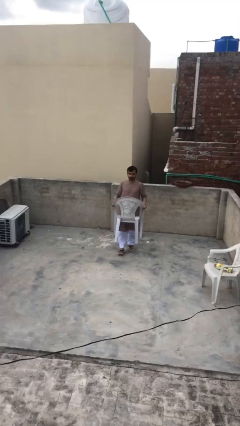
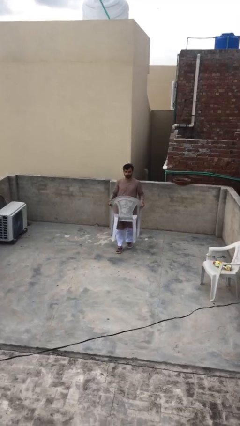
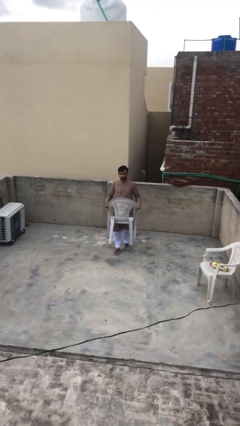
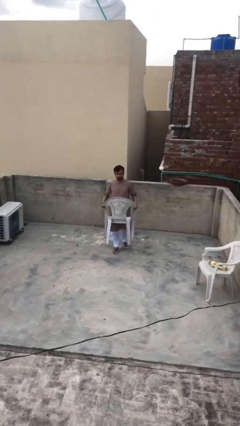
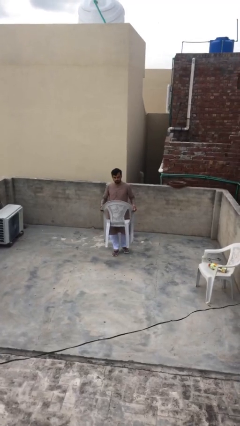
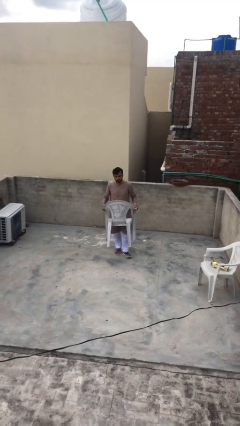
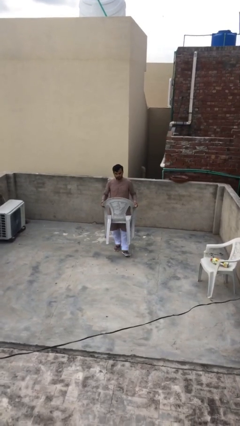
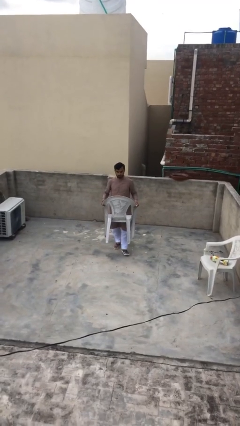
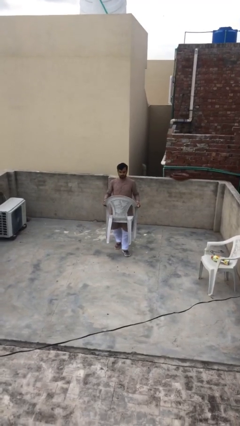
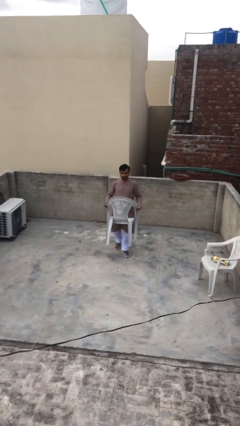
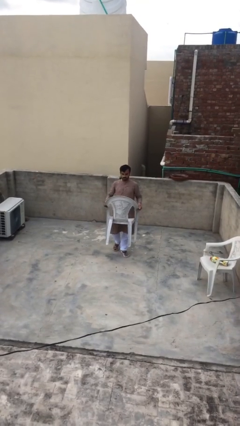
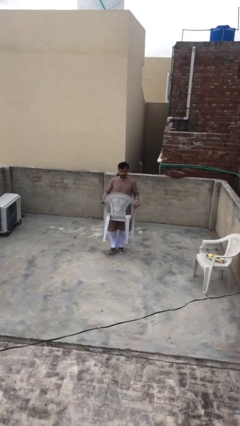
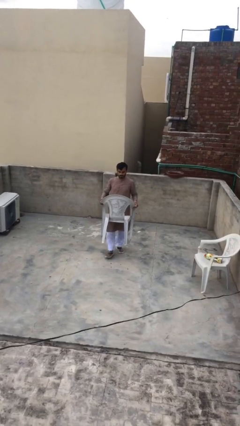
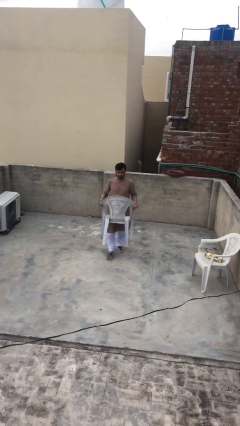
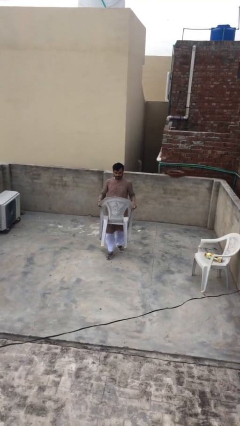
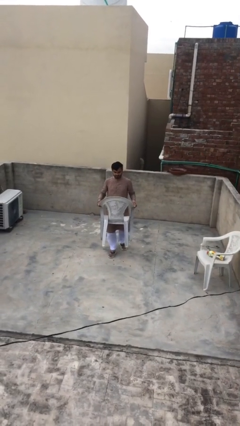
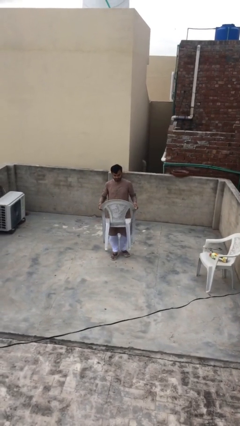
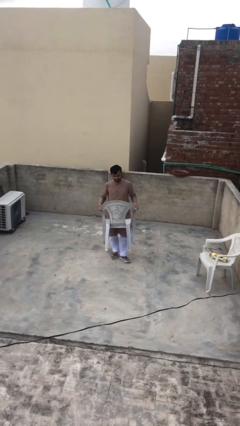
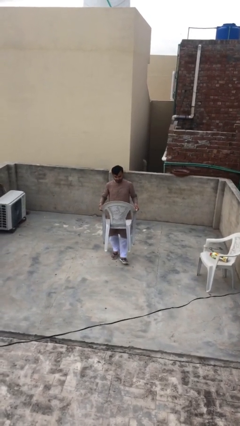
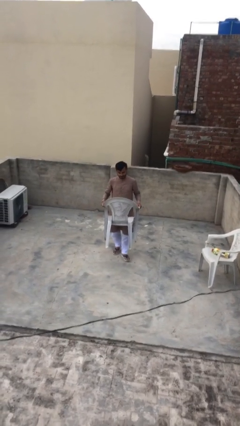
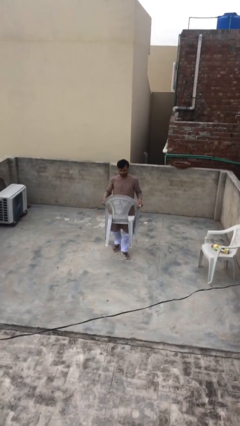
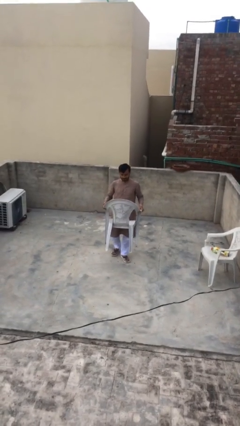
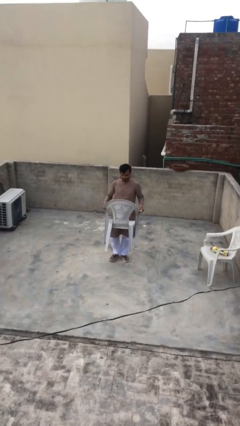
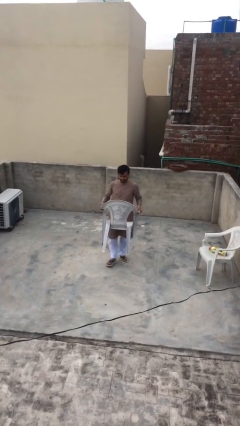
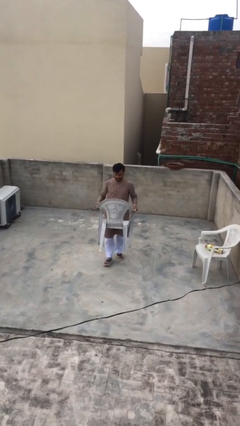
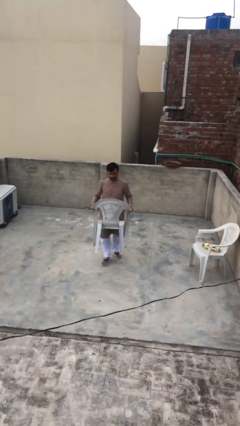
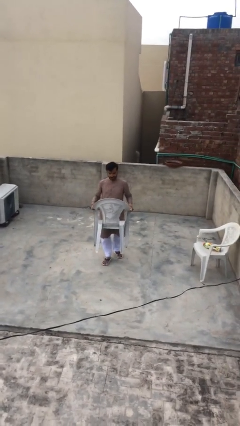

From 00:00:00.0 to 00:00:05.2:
person carries heavy object

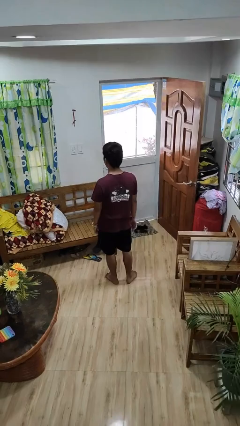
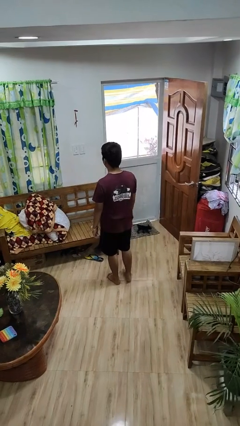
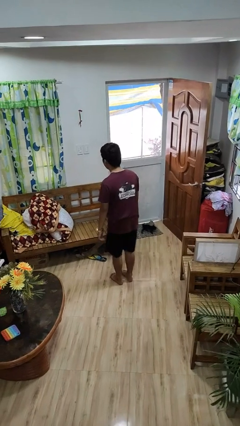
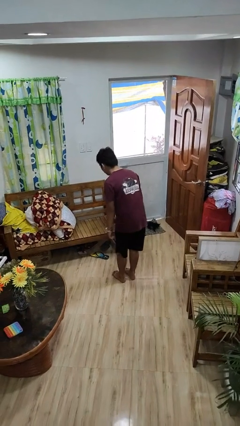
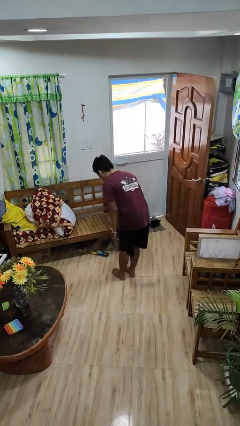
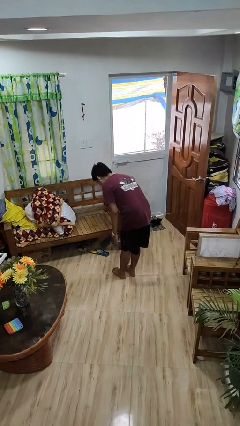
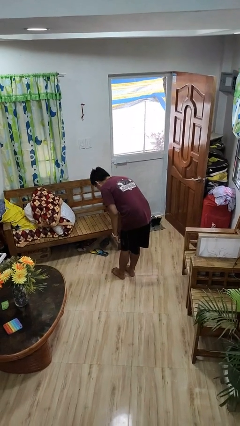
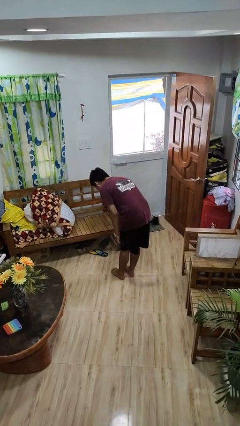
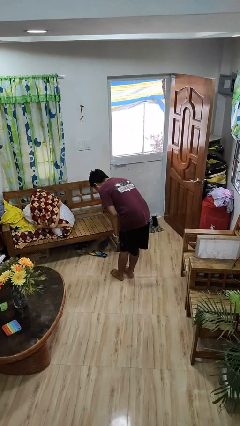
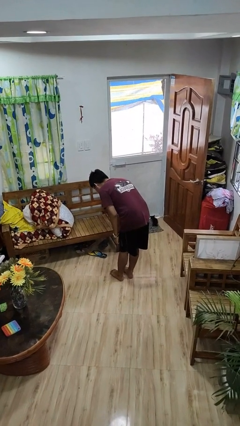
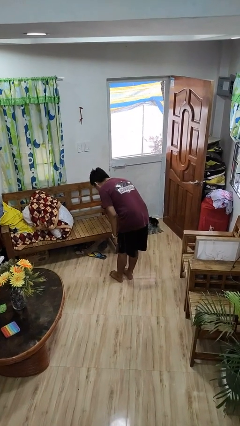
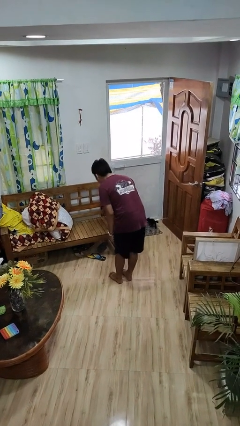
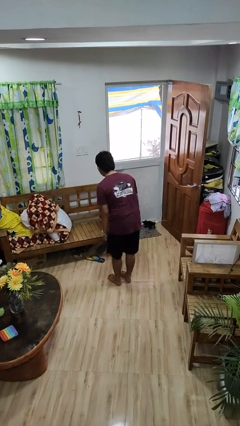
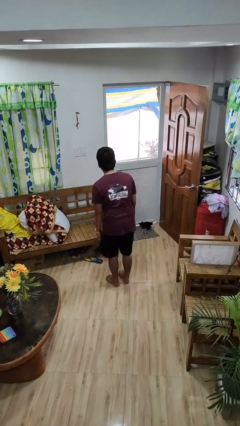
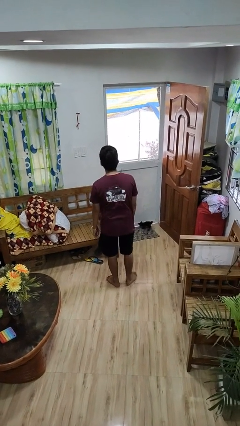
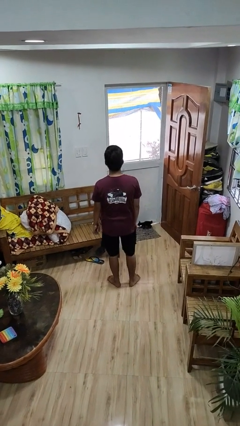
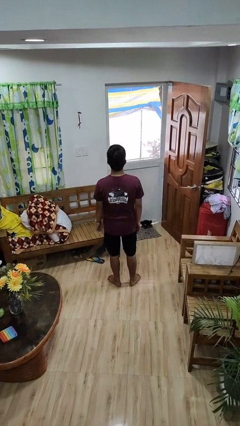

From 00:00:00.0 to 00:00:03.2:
person bows

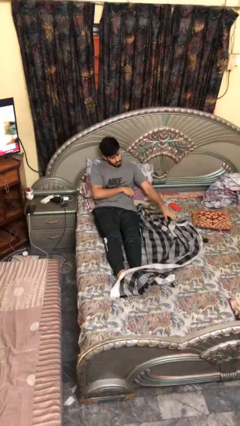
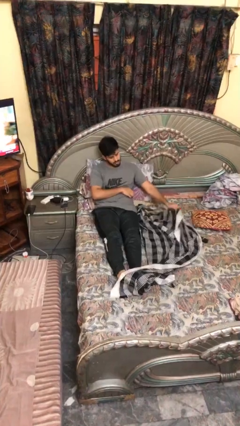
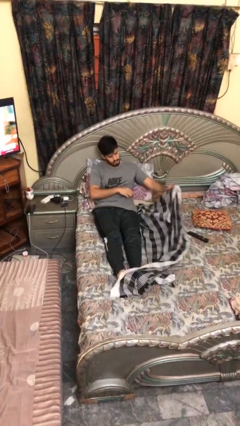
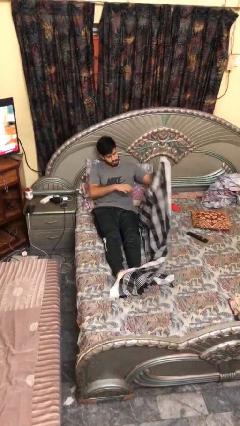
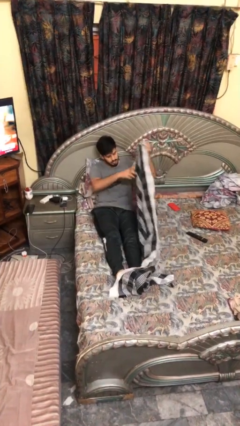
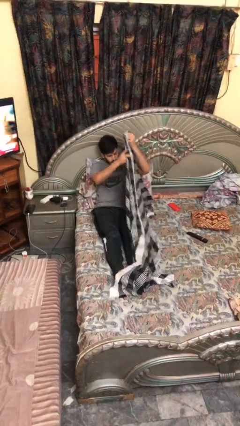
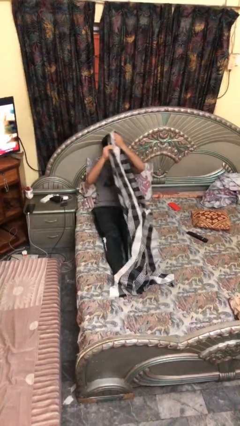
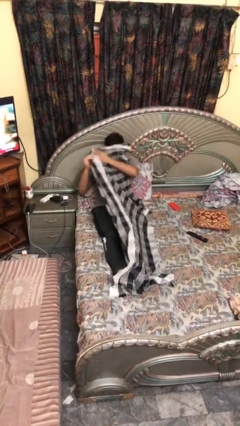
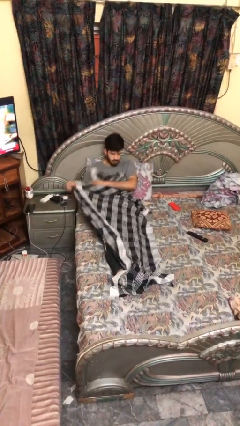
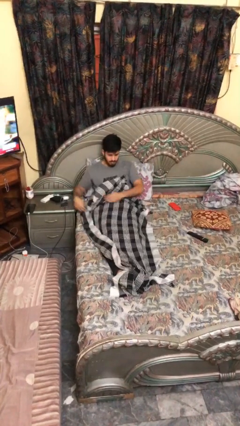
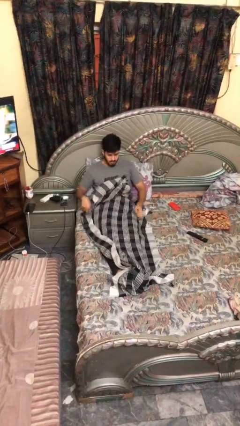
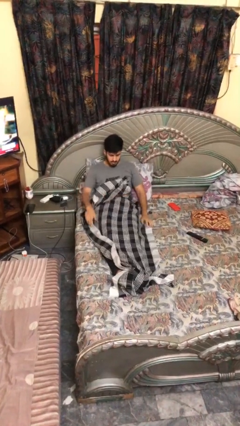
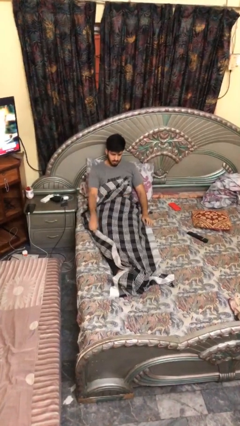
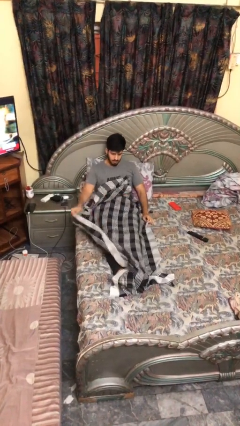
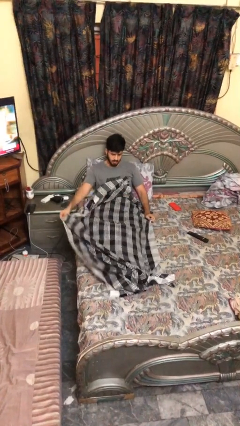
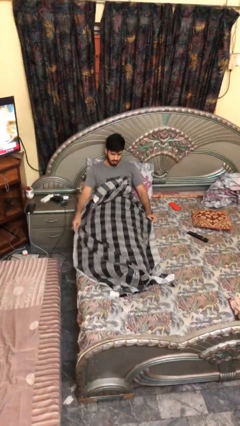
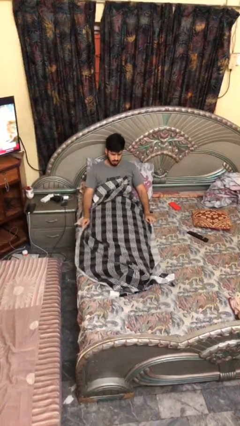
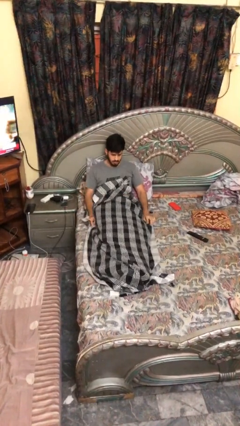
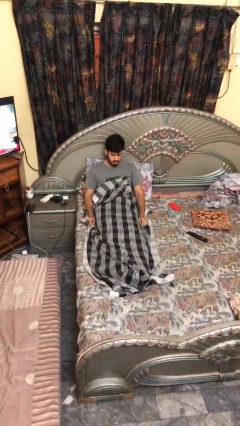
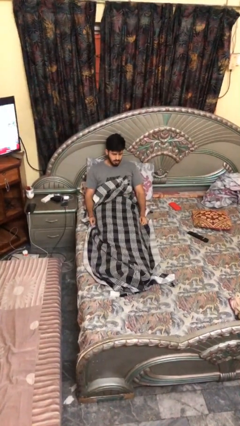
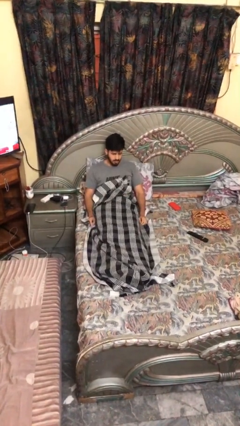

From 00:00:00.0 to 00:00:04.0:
person covers with bedsheets

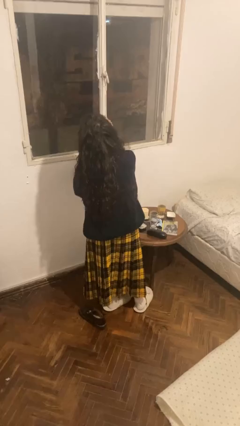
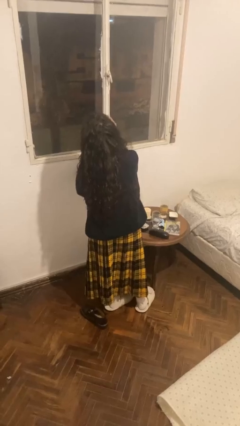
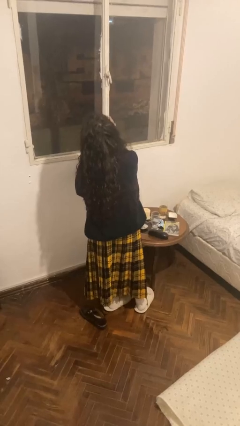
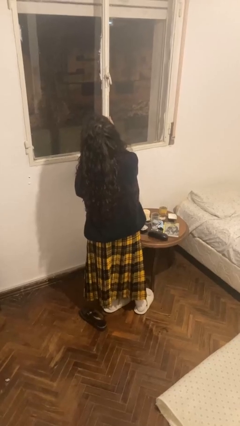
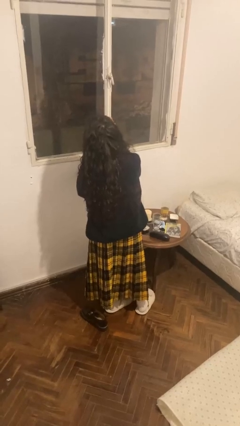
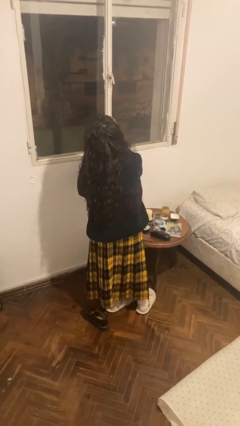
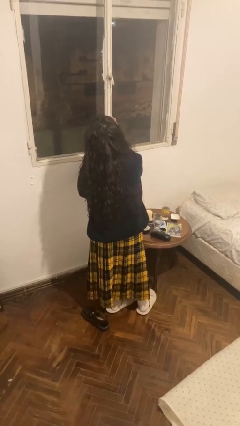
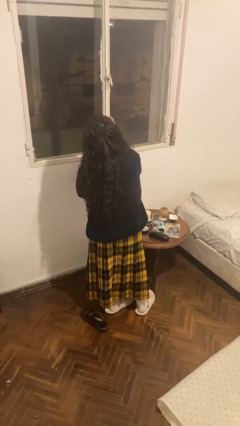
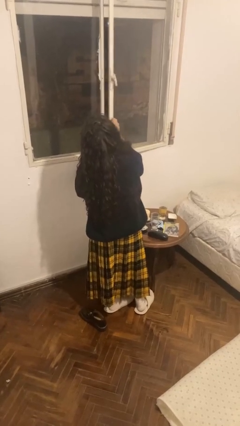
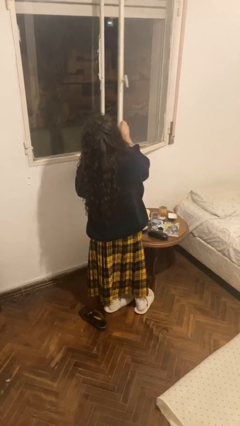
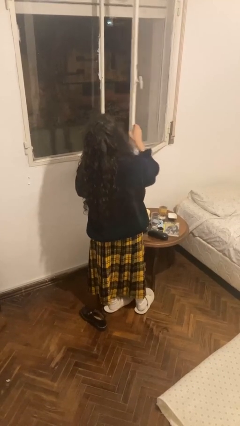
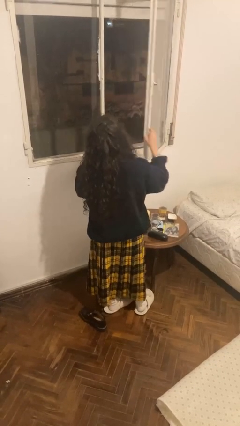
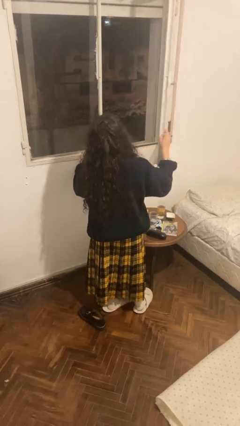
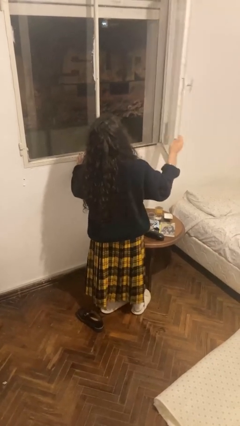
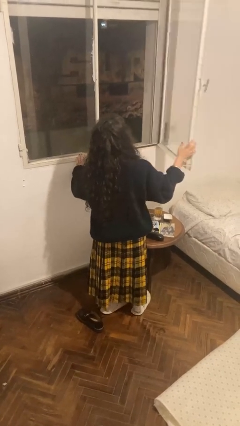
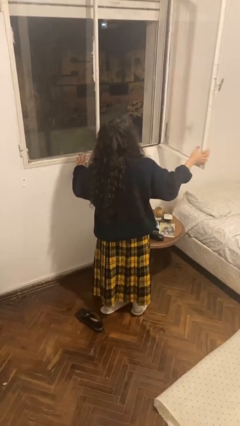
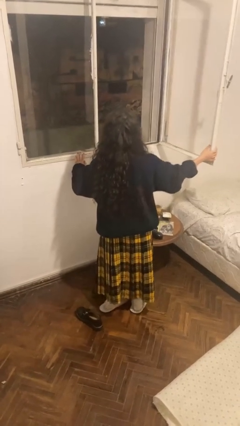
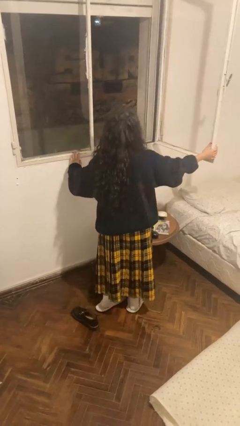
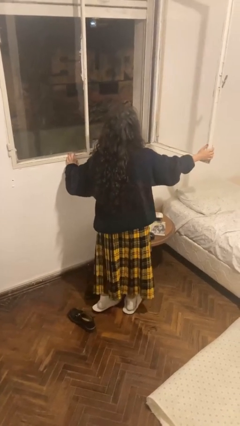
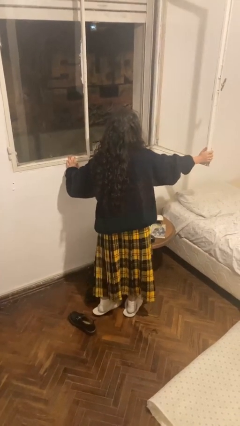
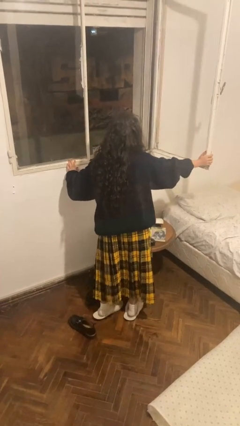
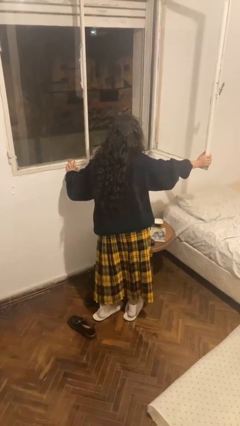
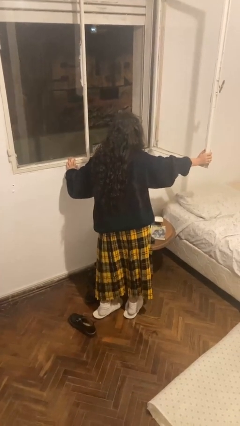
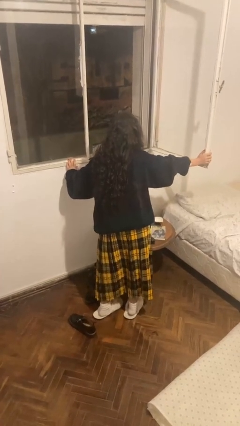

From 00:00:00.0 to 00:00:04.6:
person opens home window

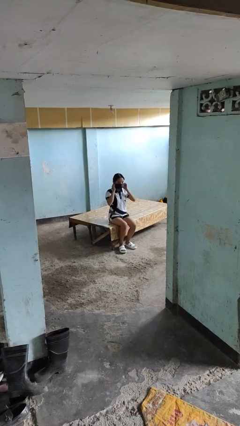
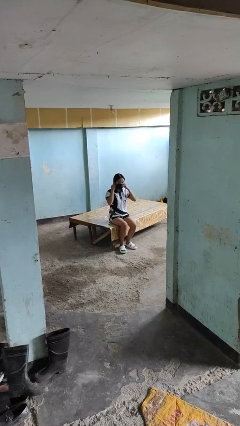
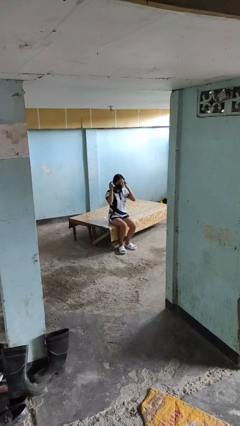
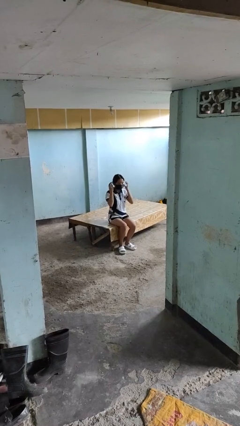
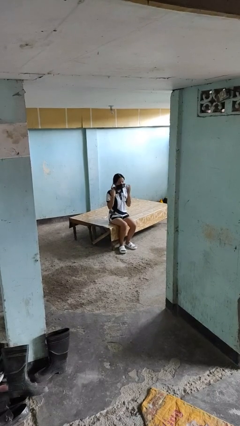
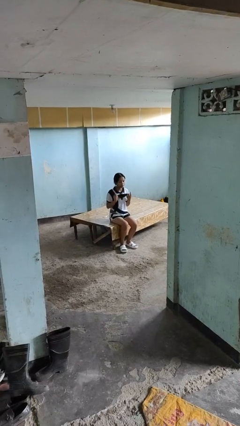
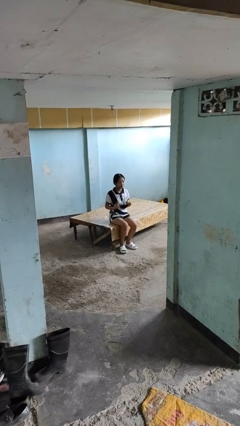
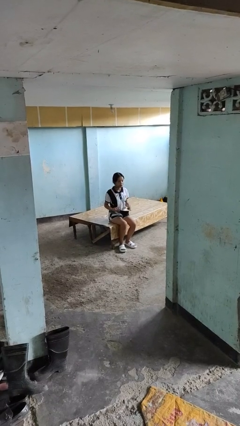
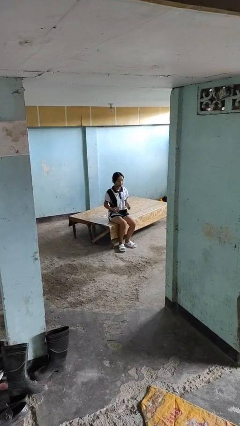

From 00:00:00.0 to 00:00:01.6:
person takes off facemask
